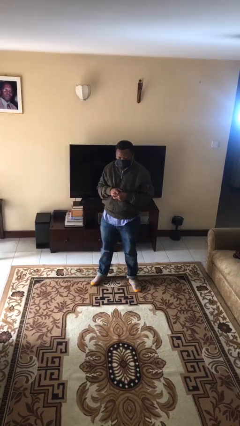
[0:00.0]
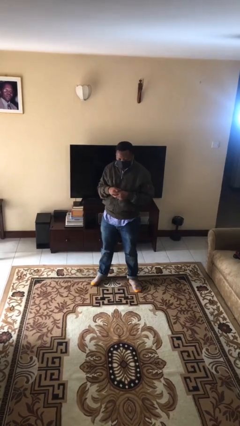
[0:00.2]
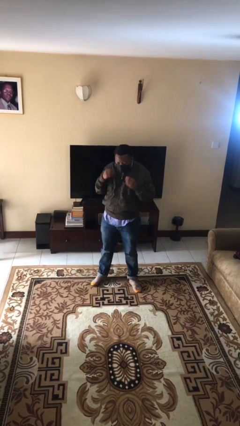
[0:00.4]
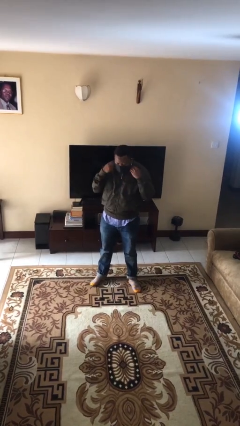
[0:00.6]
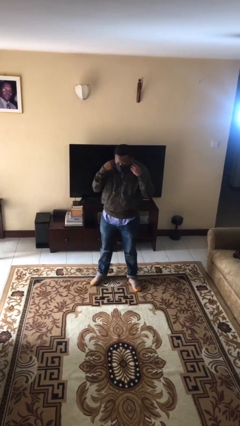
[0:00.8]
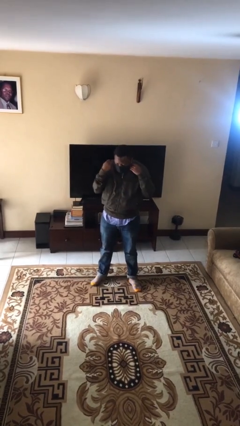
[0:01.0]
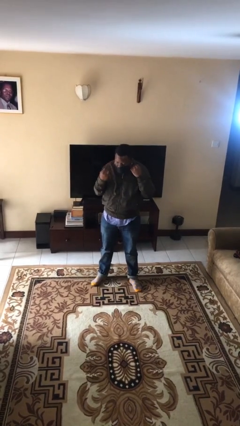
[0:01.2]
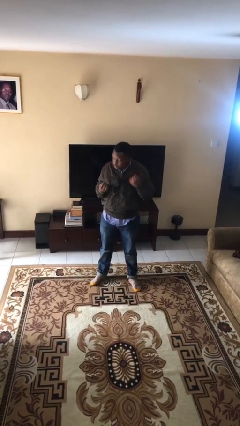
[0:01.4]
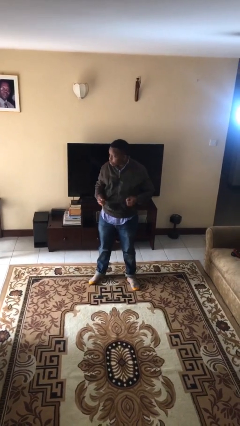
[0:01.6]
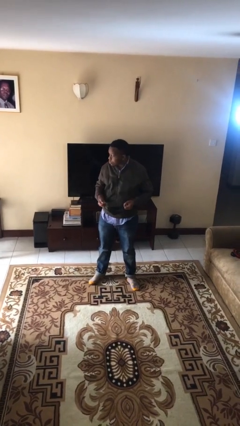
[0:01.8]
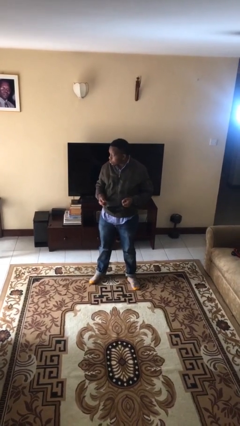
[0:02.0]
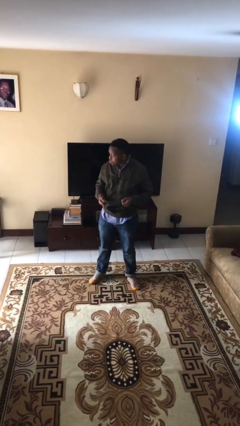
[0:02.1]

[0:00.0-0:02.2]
person takes off facemask

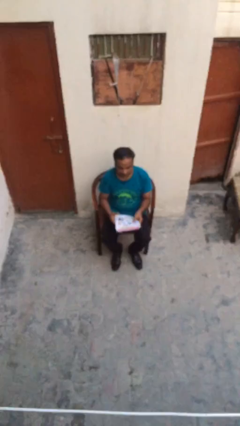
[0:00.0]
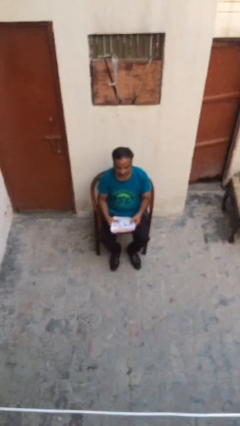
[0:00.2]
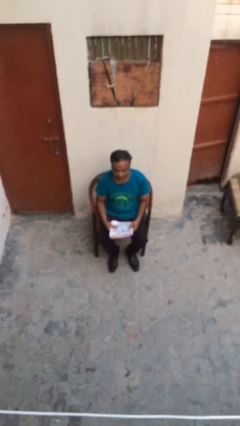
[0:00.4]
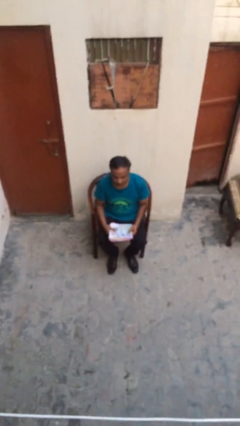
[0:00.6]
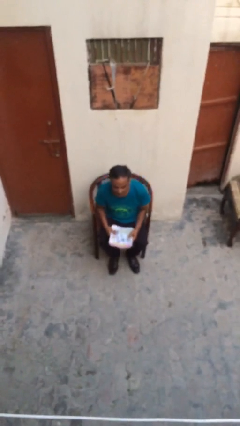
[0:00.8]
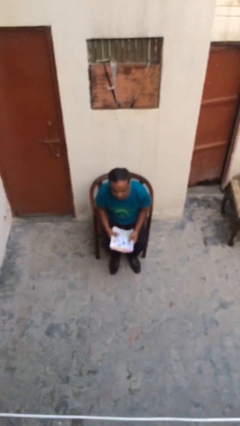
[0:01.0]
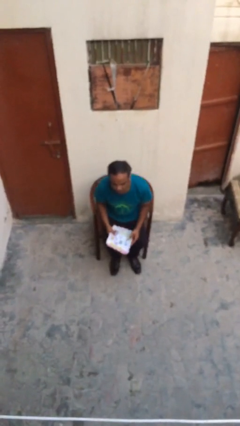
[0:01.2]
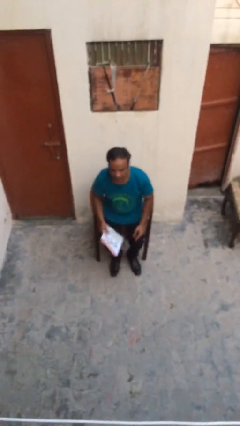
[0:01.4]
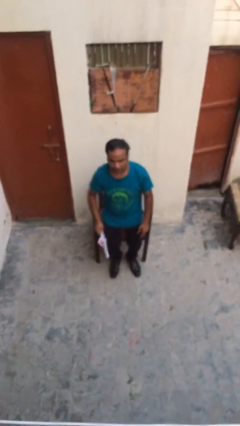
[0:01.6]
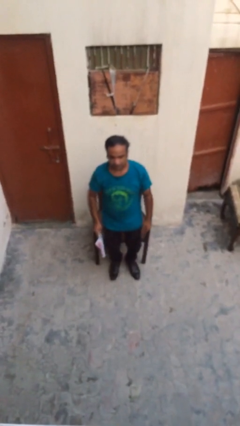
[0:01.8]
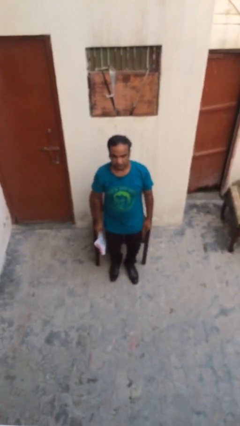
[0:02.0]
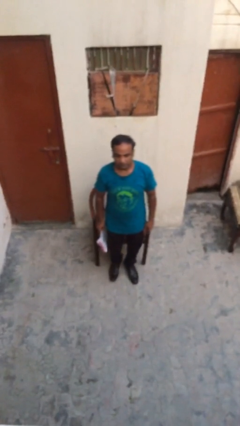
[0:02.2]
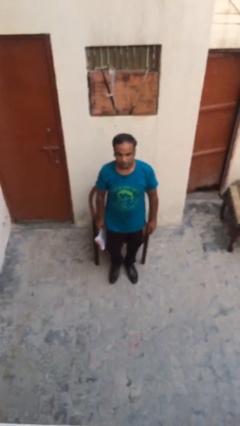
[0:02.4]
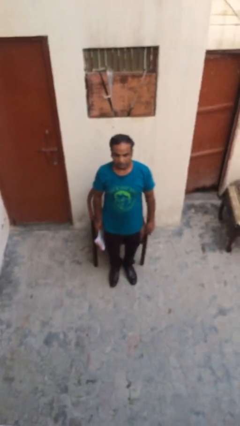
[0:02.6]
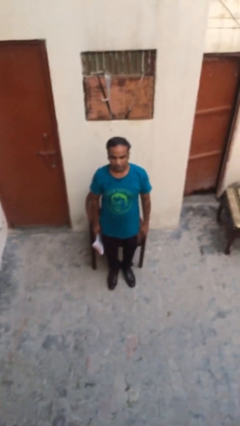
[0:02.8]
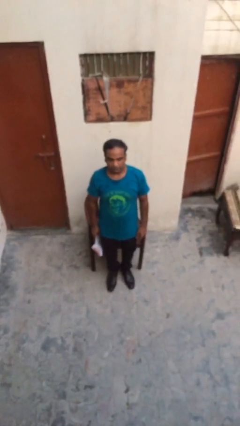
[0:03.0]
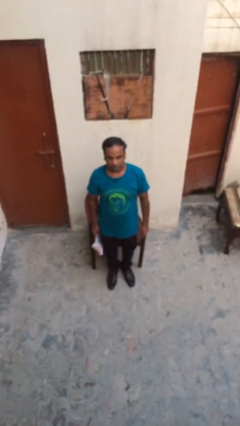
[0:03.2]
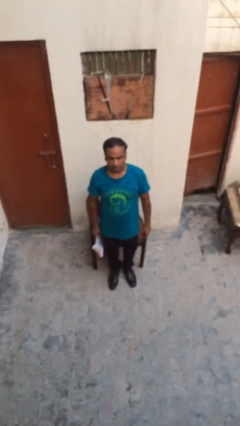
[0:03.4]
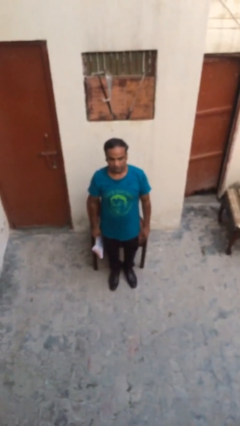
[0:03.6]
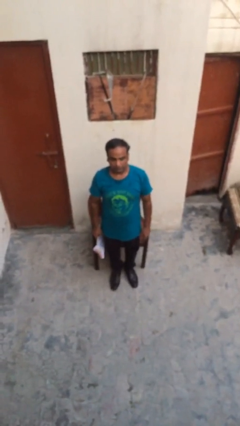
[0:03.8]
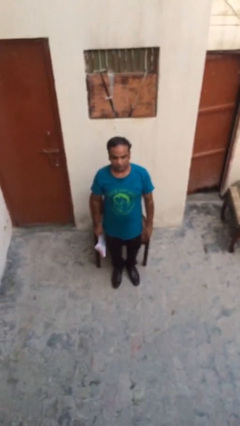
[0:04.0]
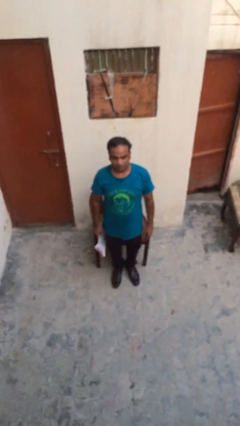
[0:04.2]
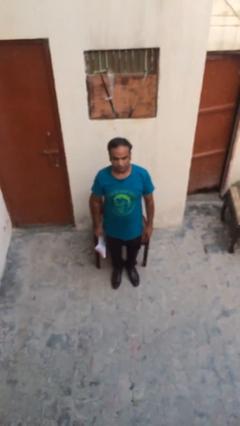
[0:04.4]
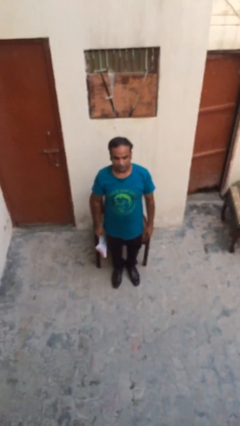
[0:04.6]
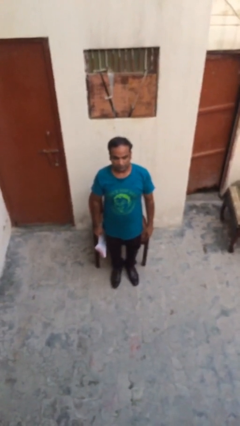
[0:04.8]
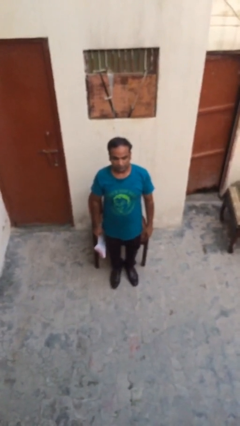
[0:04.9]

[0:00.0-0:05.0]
person stands up

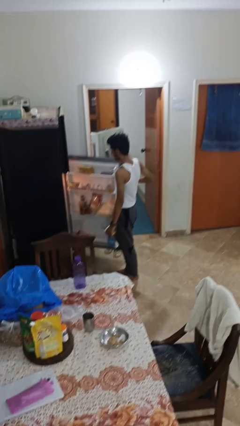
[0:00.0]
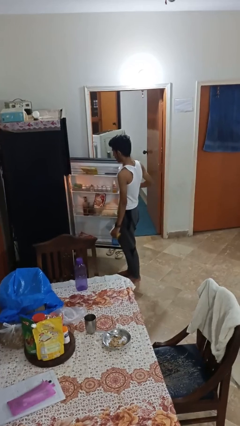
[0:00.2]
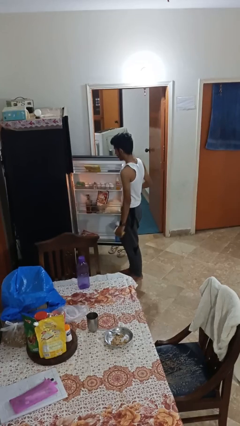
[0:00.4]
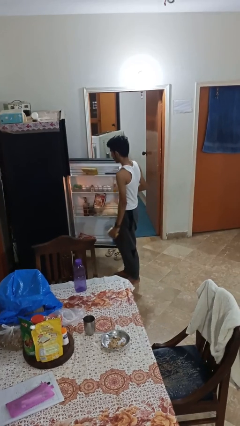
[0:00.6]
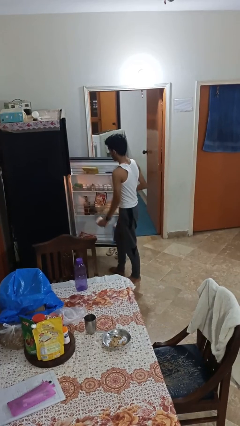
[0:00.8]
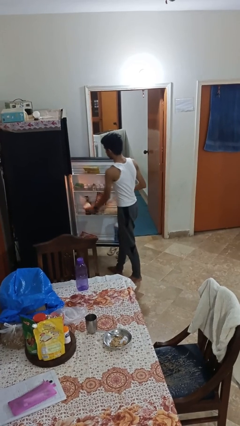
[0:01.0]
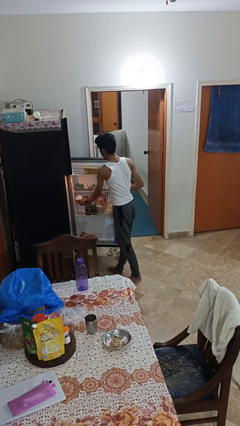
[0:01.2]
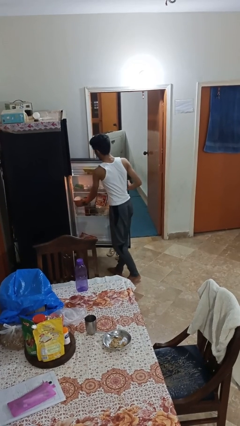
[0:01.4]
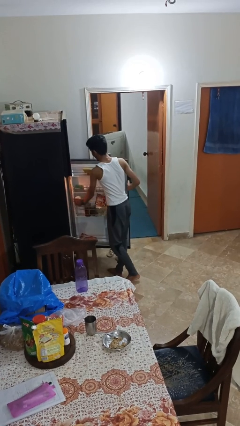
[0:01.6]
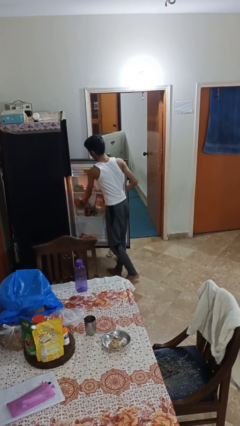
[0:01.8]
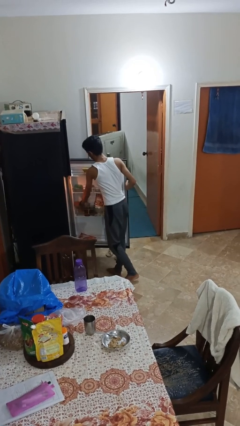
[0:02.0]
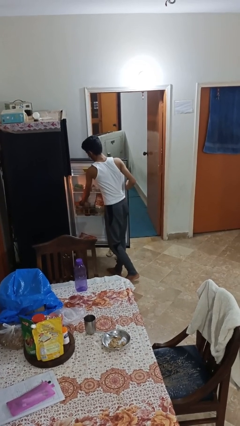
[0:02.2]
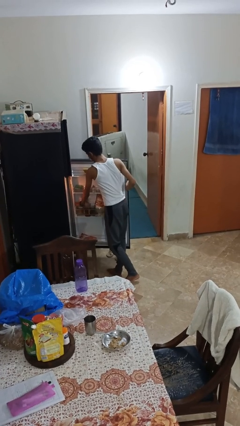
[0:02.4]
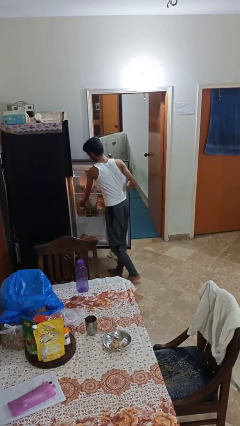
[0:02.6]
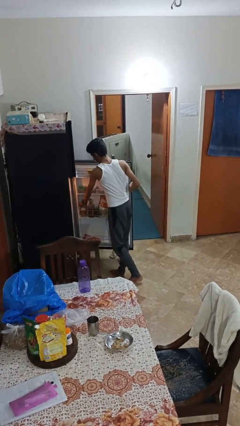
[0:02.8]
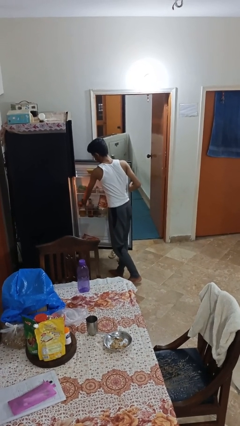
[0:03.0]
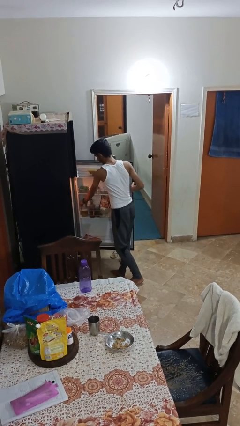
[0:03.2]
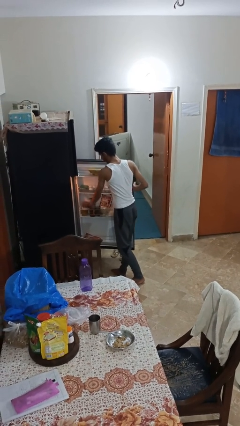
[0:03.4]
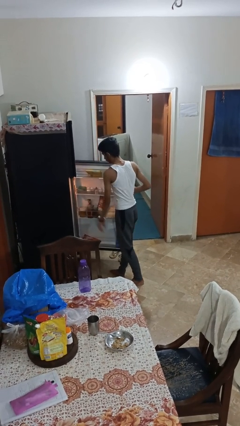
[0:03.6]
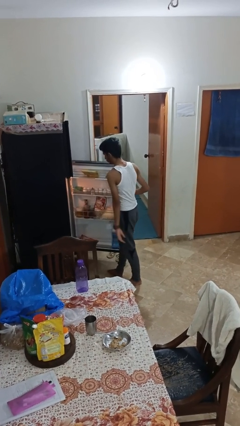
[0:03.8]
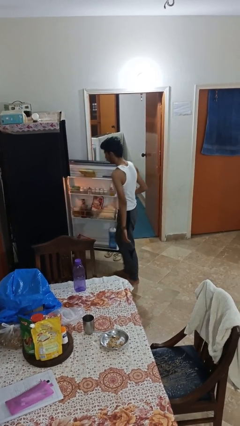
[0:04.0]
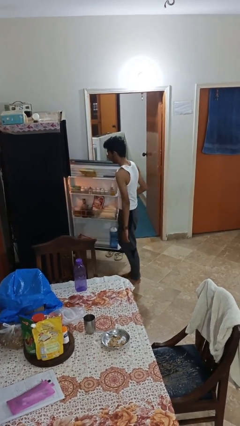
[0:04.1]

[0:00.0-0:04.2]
person puts object into refrigerator

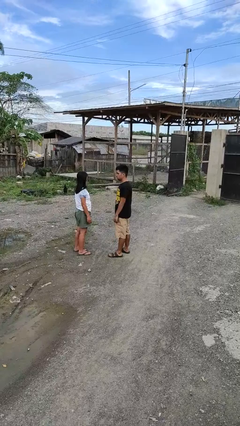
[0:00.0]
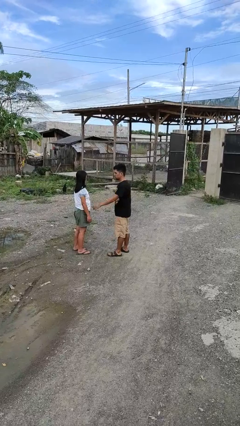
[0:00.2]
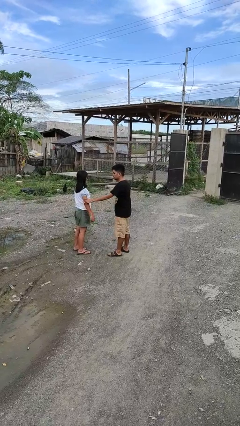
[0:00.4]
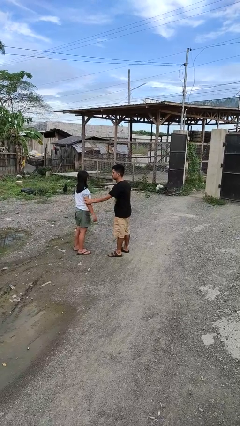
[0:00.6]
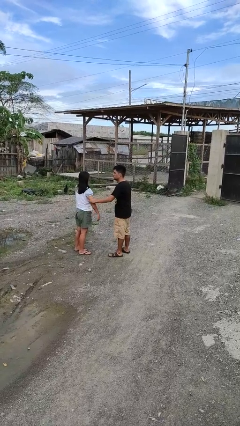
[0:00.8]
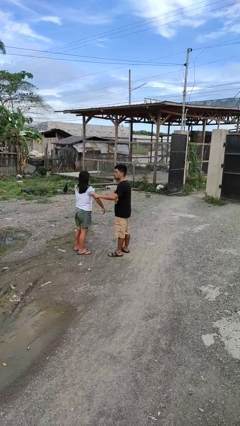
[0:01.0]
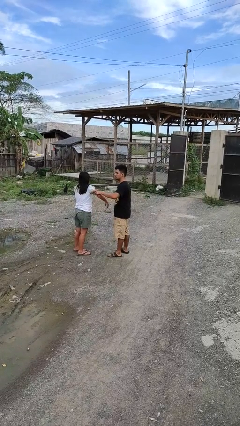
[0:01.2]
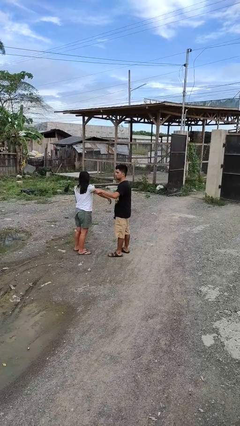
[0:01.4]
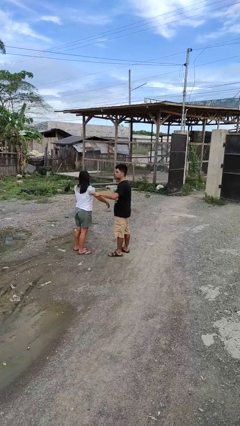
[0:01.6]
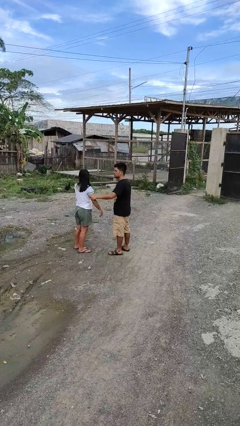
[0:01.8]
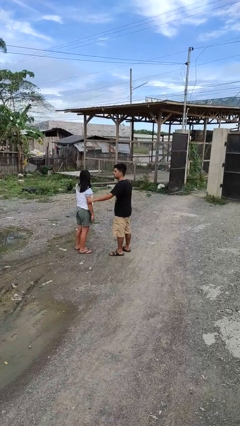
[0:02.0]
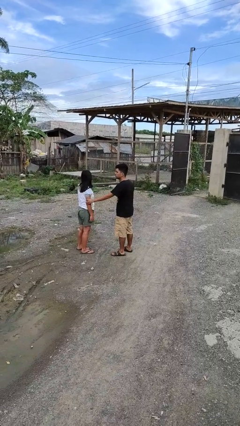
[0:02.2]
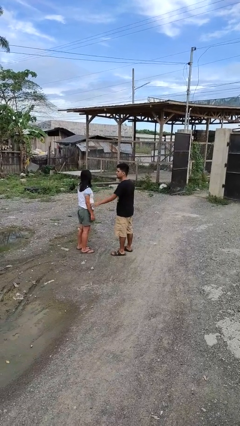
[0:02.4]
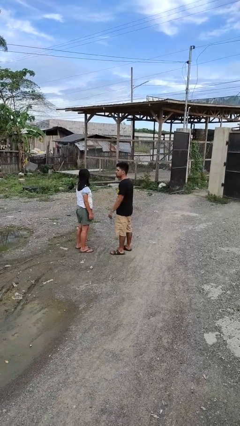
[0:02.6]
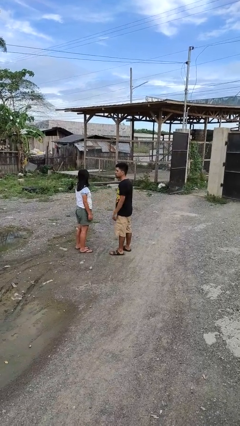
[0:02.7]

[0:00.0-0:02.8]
person grabs person by bicep

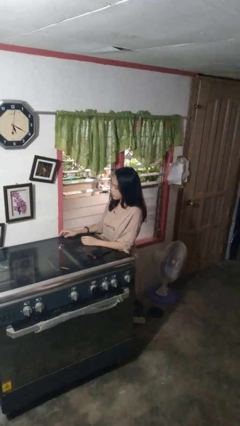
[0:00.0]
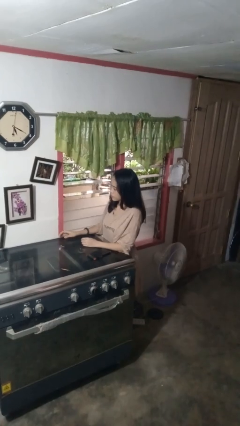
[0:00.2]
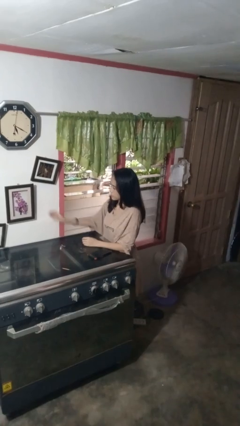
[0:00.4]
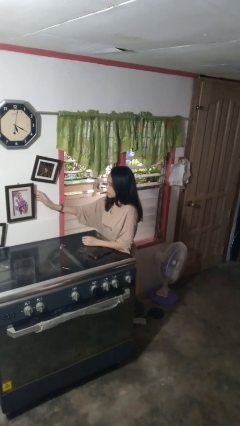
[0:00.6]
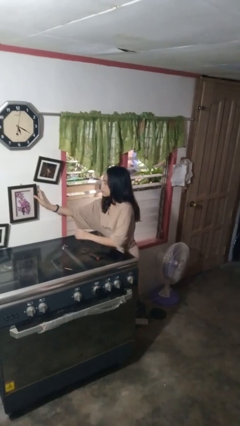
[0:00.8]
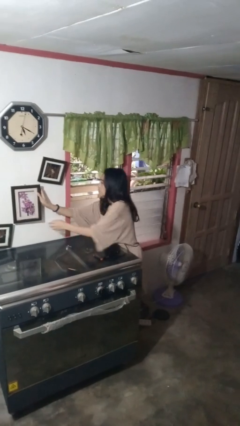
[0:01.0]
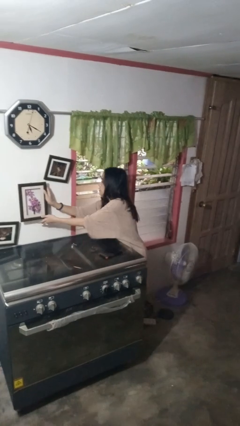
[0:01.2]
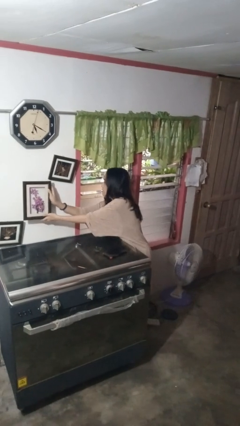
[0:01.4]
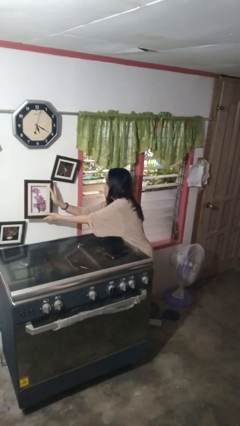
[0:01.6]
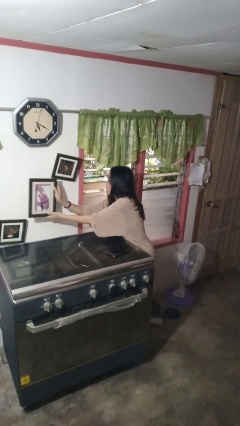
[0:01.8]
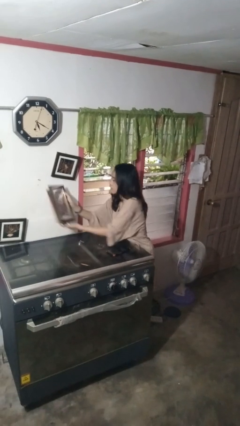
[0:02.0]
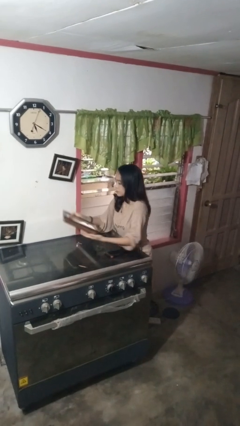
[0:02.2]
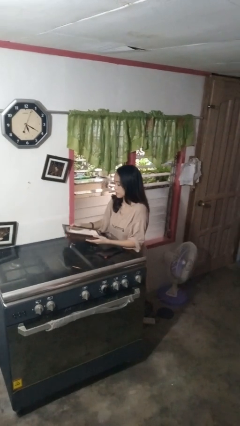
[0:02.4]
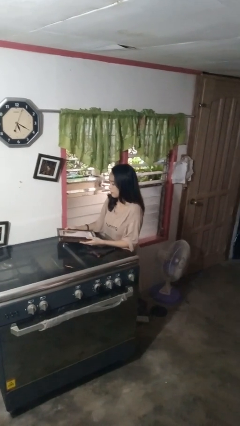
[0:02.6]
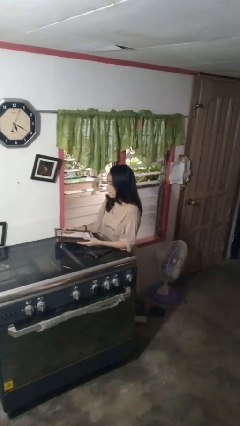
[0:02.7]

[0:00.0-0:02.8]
person takes down picture frame

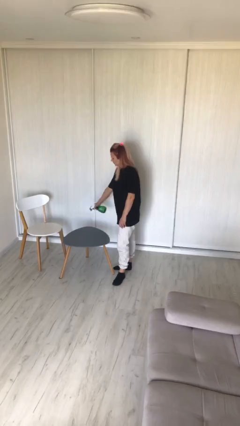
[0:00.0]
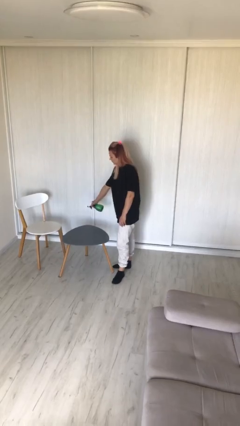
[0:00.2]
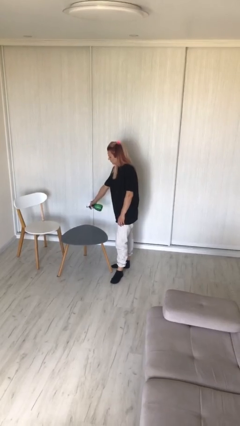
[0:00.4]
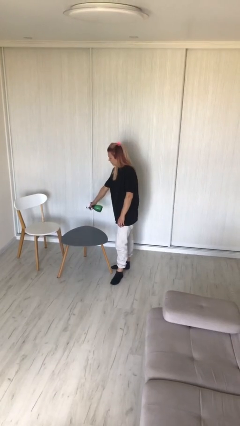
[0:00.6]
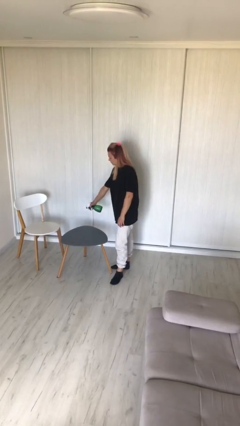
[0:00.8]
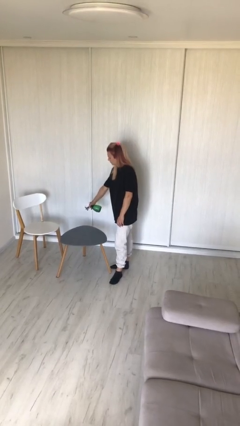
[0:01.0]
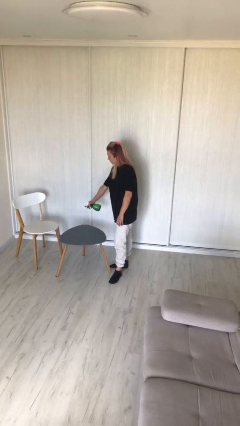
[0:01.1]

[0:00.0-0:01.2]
person sprays from bottle
